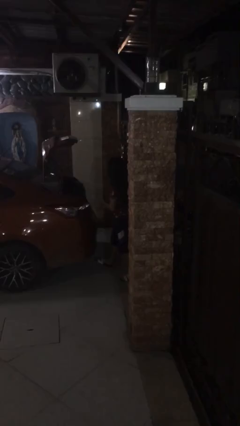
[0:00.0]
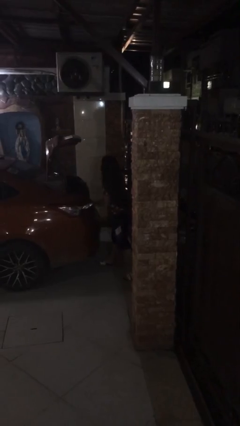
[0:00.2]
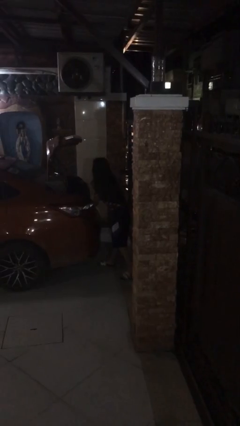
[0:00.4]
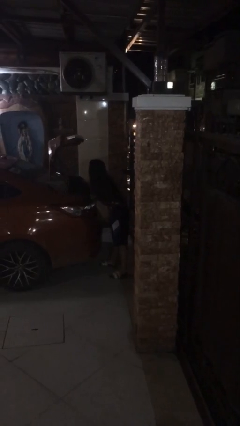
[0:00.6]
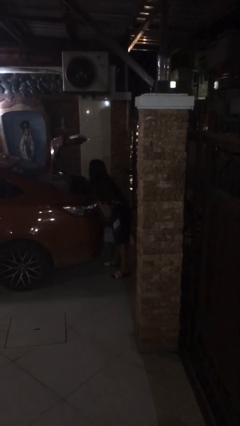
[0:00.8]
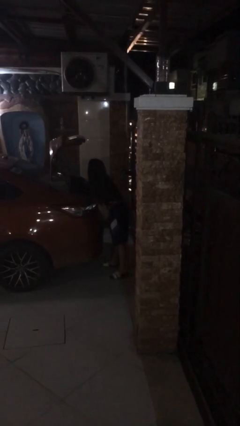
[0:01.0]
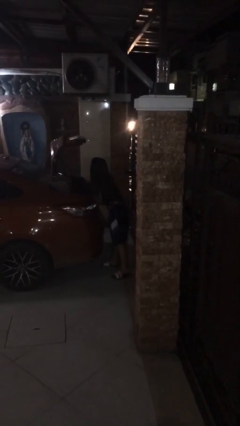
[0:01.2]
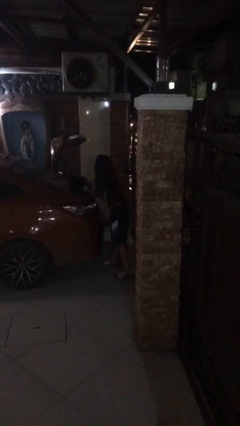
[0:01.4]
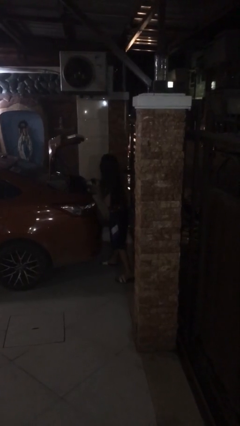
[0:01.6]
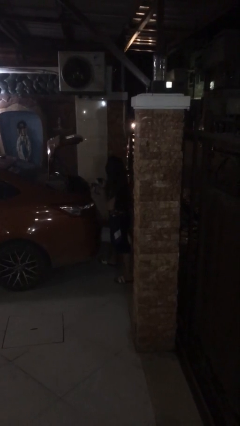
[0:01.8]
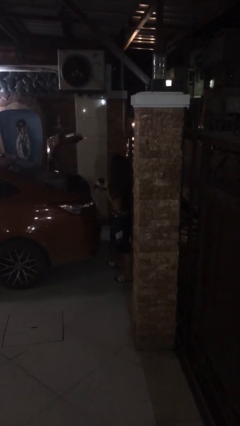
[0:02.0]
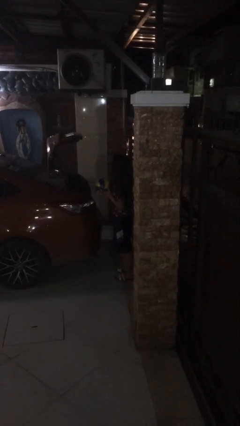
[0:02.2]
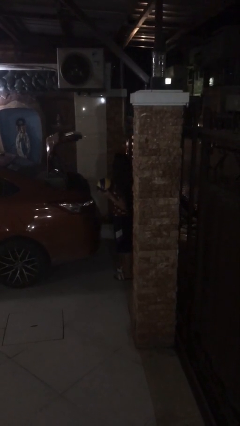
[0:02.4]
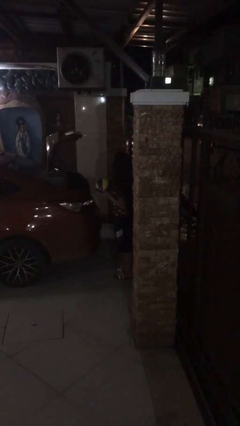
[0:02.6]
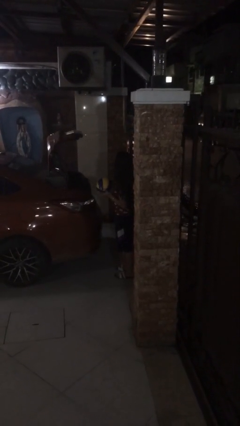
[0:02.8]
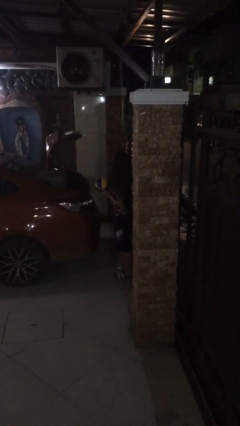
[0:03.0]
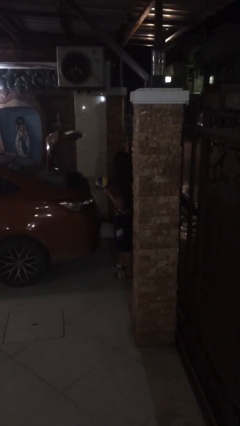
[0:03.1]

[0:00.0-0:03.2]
person unloads car

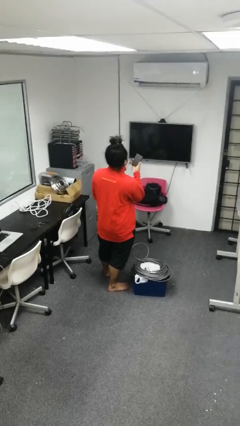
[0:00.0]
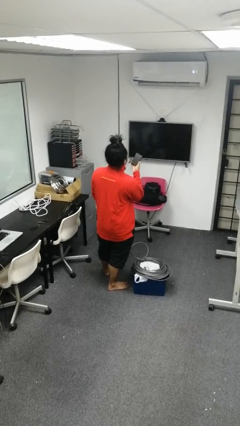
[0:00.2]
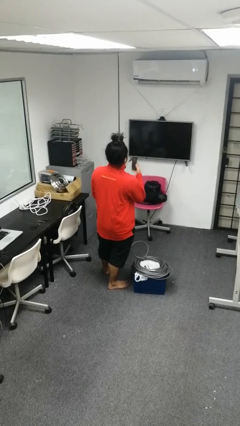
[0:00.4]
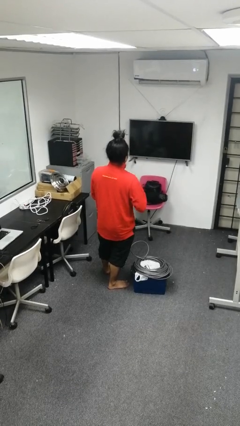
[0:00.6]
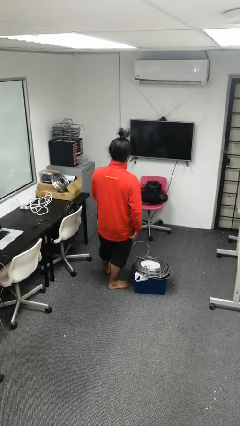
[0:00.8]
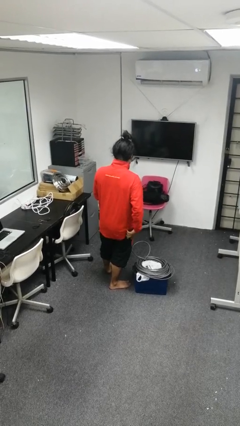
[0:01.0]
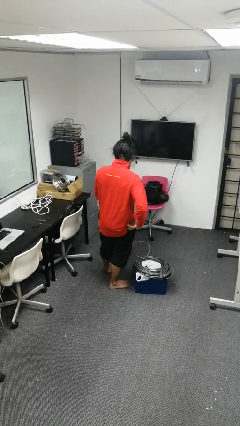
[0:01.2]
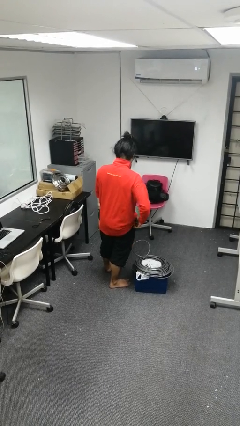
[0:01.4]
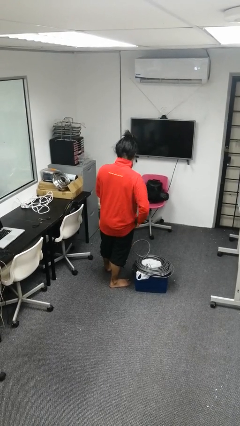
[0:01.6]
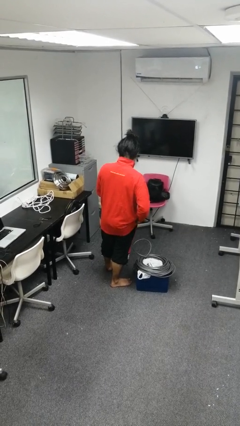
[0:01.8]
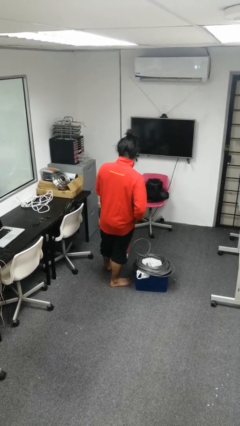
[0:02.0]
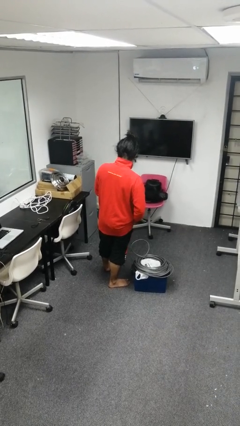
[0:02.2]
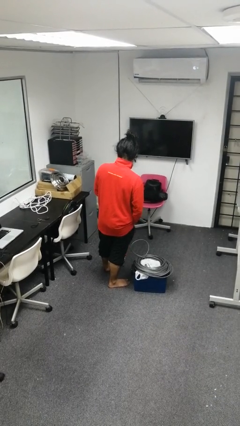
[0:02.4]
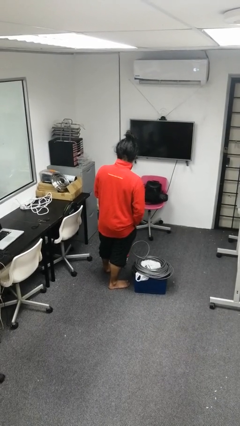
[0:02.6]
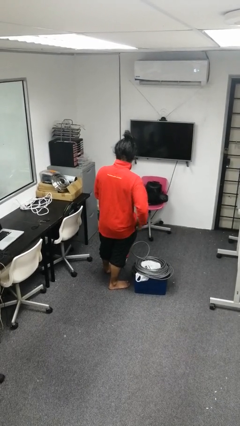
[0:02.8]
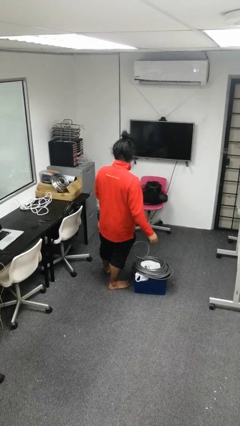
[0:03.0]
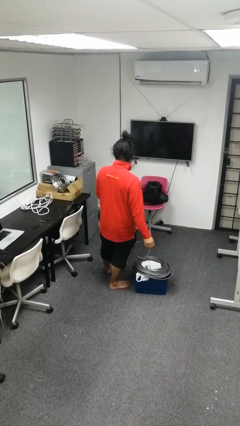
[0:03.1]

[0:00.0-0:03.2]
person puts phone into pocket

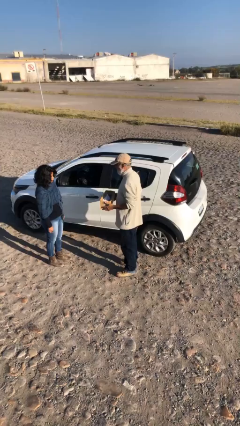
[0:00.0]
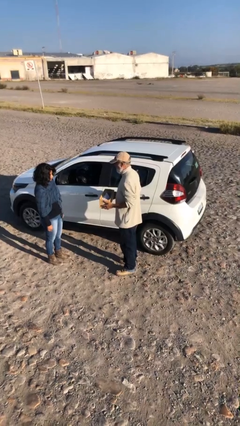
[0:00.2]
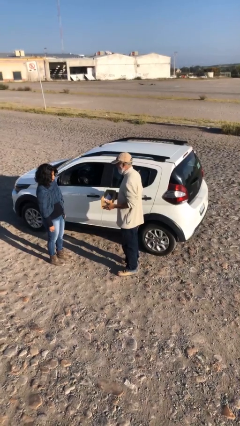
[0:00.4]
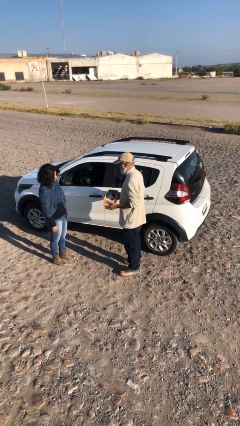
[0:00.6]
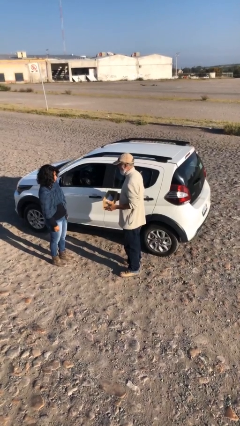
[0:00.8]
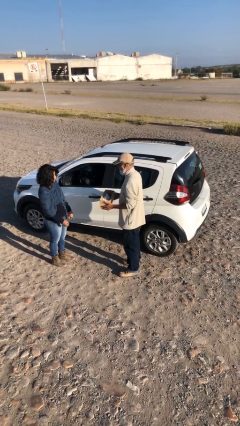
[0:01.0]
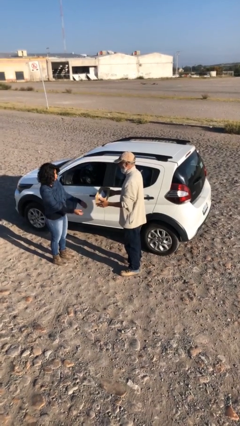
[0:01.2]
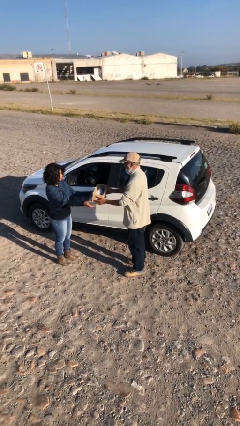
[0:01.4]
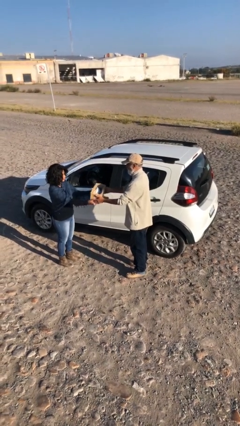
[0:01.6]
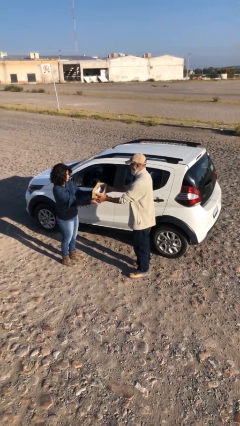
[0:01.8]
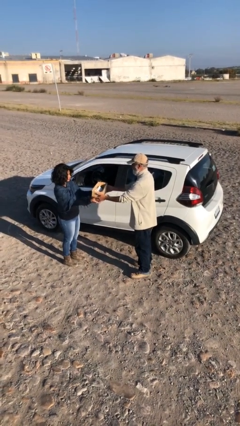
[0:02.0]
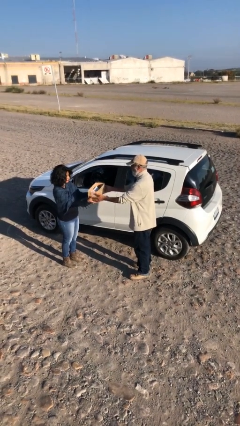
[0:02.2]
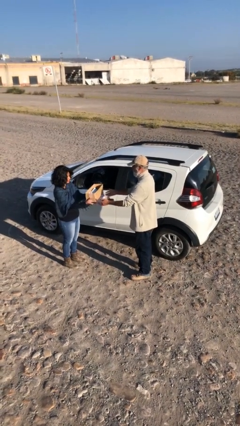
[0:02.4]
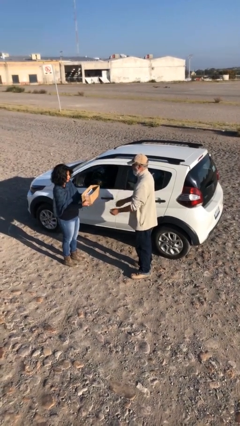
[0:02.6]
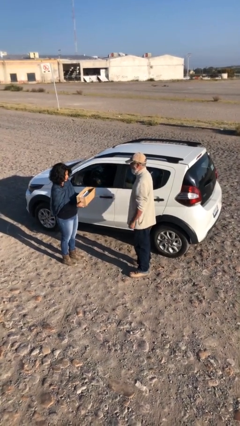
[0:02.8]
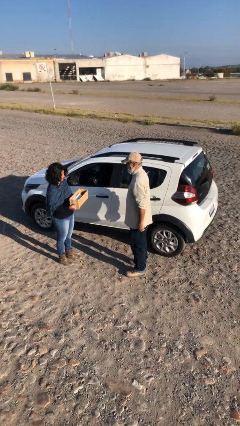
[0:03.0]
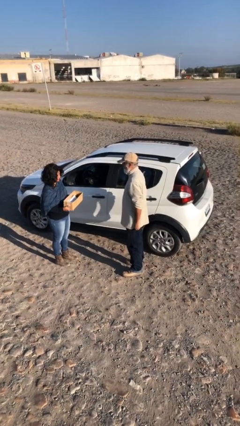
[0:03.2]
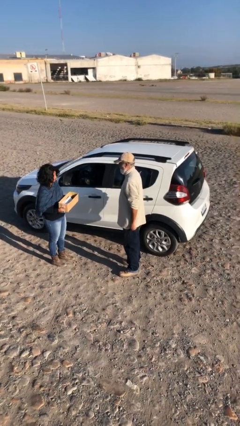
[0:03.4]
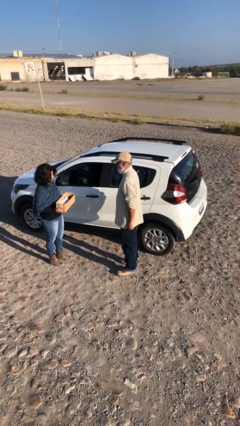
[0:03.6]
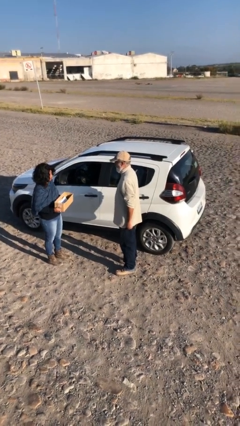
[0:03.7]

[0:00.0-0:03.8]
person transfers object to person

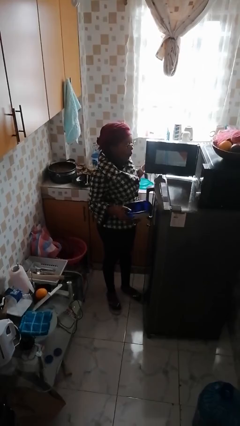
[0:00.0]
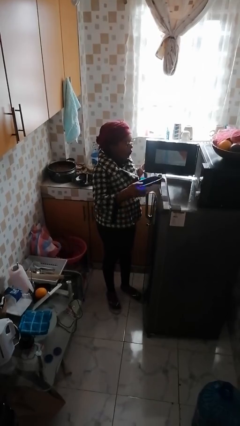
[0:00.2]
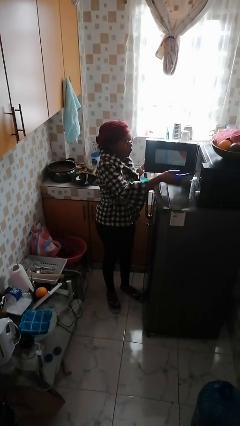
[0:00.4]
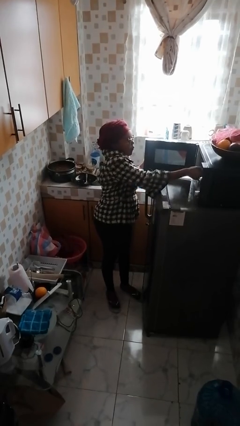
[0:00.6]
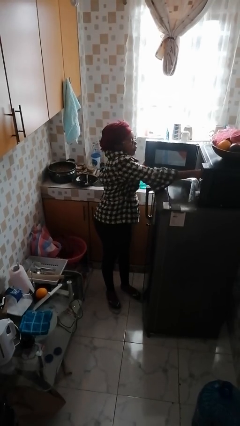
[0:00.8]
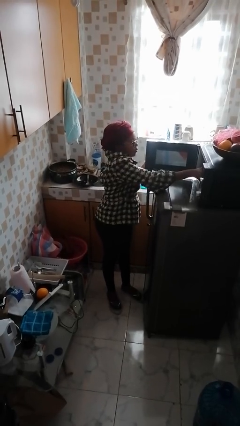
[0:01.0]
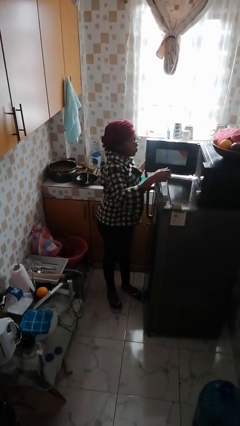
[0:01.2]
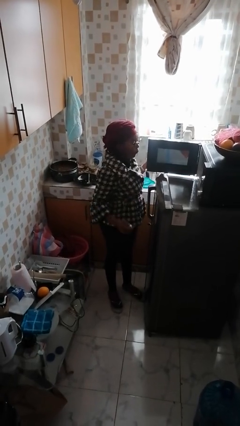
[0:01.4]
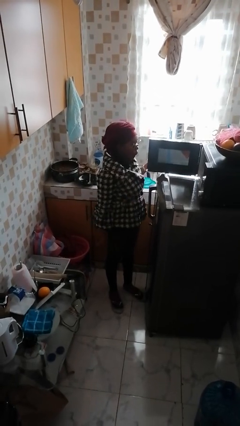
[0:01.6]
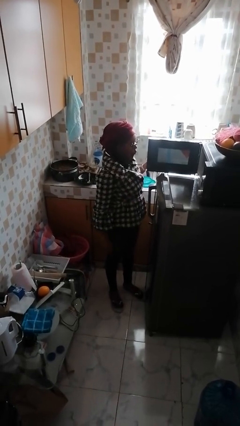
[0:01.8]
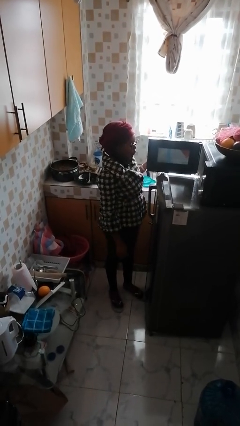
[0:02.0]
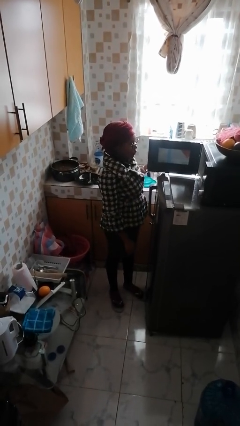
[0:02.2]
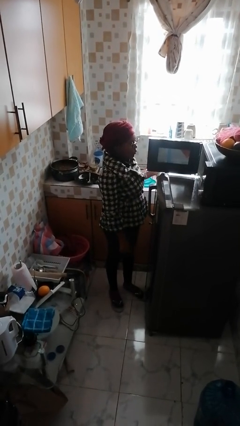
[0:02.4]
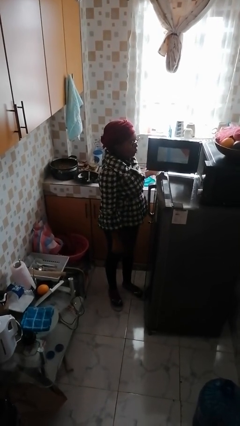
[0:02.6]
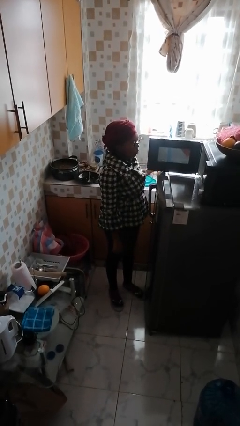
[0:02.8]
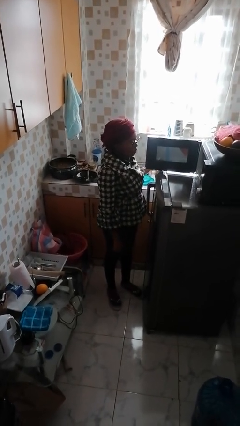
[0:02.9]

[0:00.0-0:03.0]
person puts object into microwave

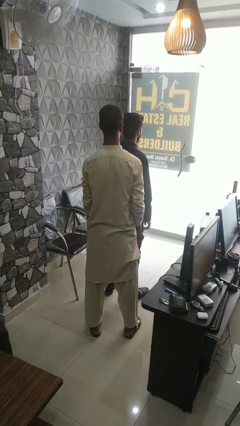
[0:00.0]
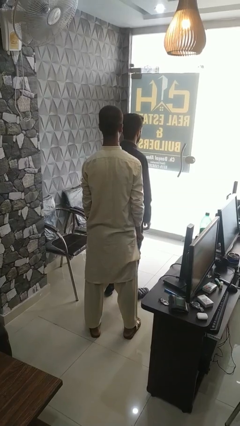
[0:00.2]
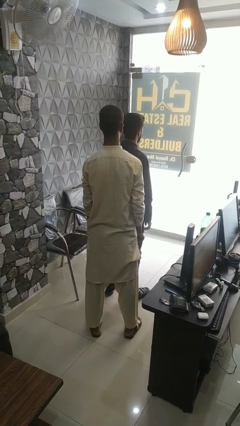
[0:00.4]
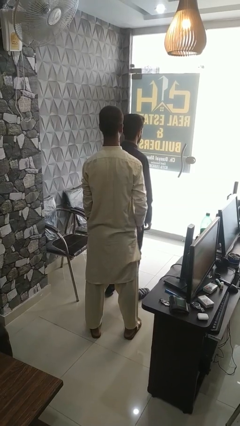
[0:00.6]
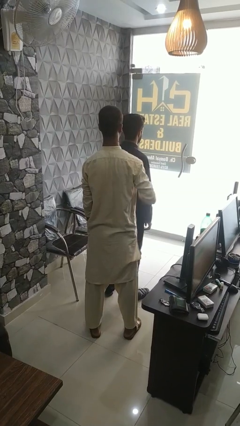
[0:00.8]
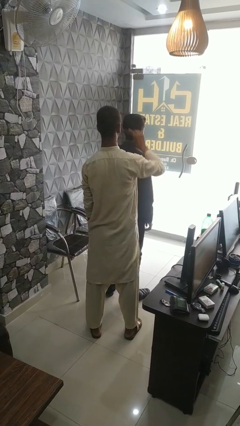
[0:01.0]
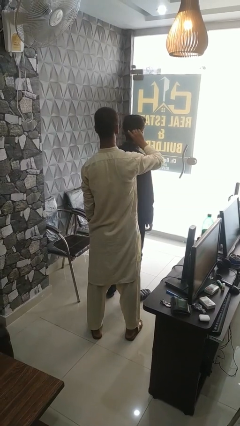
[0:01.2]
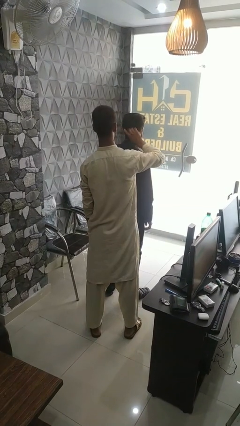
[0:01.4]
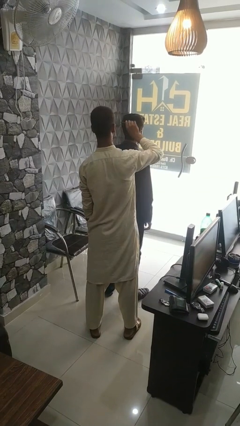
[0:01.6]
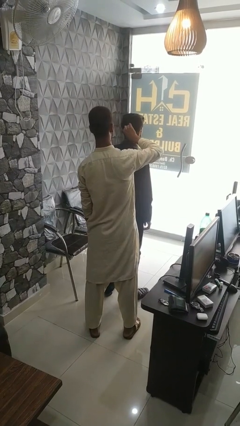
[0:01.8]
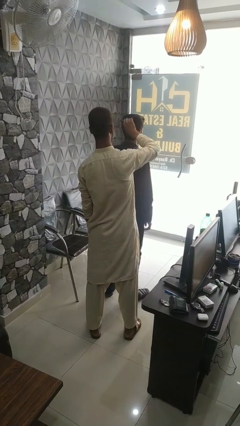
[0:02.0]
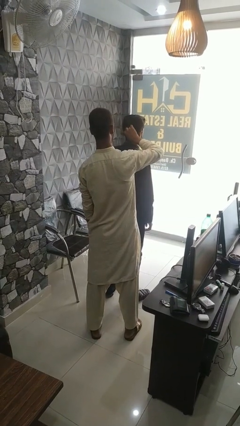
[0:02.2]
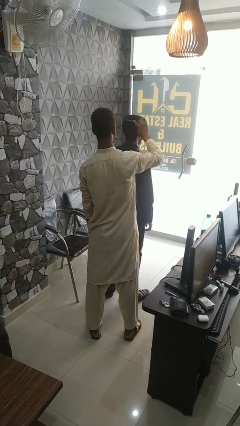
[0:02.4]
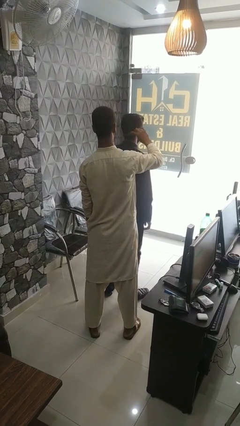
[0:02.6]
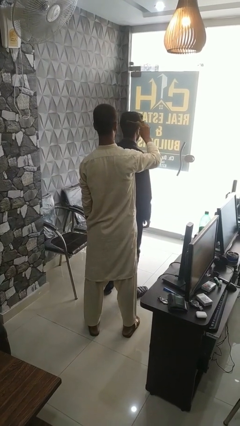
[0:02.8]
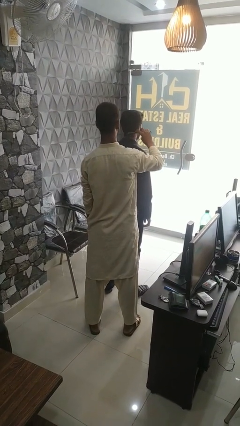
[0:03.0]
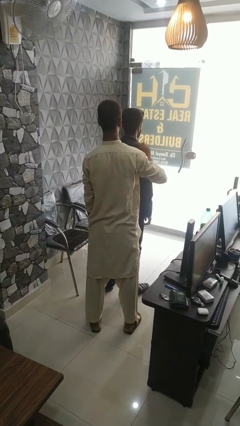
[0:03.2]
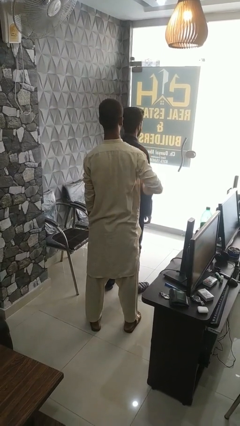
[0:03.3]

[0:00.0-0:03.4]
person brushes hair of person

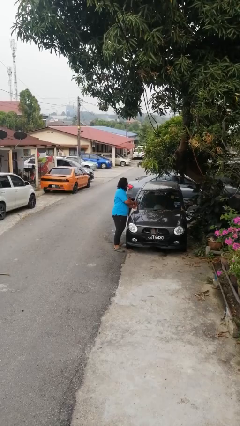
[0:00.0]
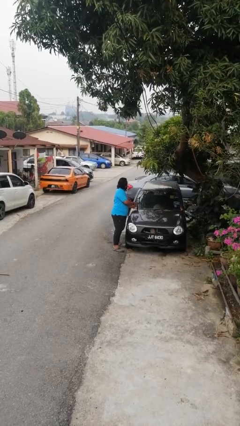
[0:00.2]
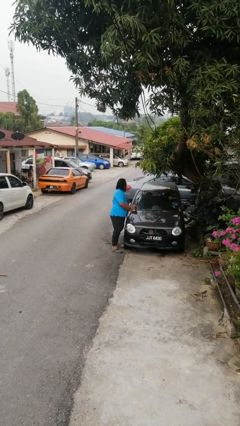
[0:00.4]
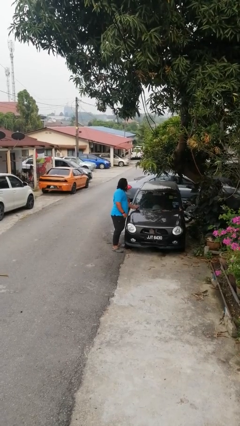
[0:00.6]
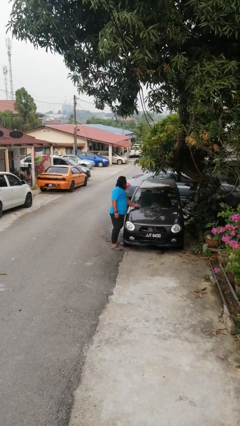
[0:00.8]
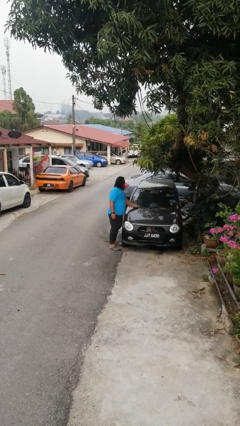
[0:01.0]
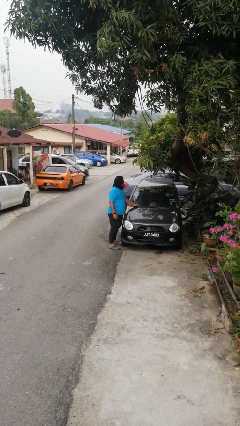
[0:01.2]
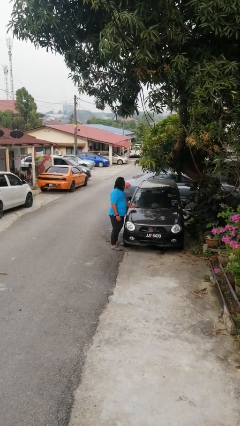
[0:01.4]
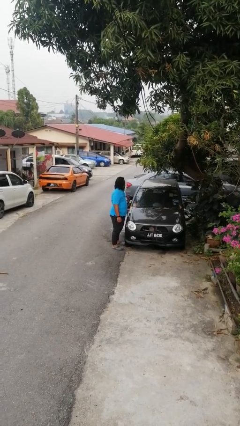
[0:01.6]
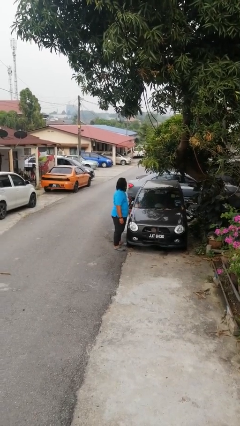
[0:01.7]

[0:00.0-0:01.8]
person flips down car wipers
